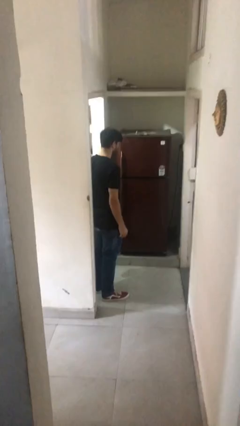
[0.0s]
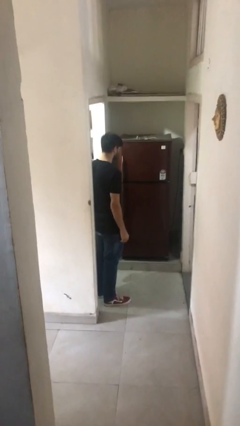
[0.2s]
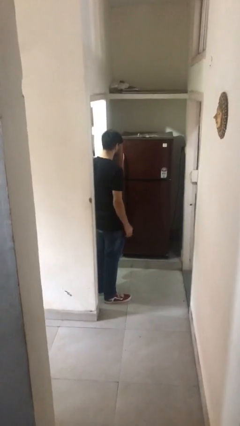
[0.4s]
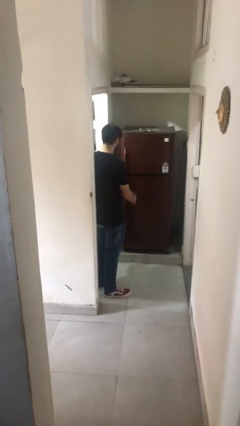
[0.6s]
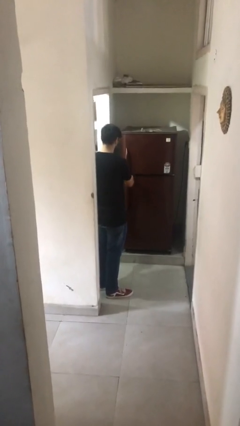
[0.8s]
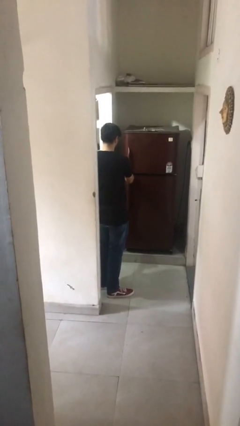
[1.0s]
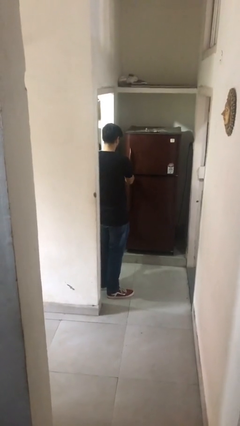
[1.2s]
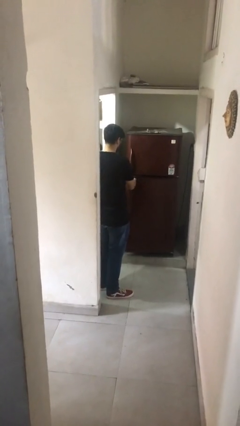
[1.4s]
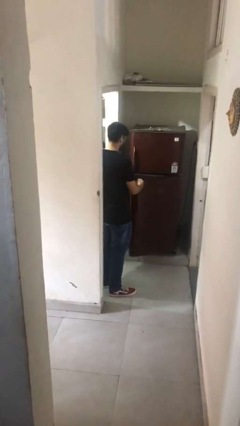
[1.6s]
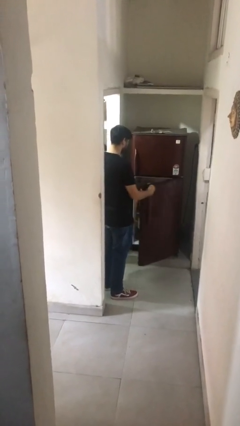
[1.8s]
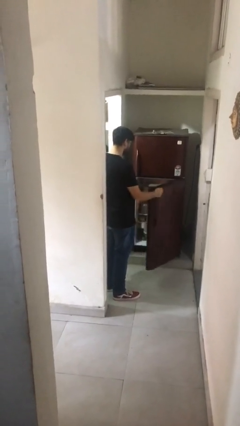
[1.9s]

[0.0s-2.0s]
person opens refrigerator

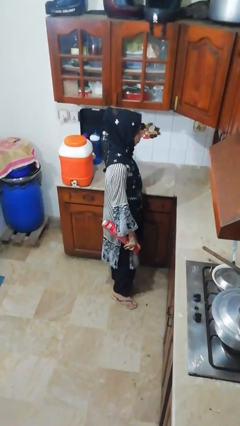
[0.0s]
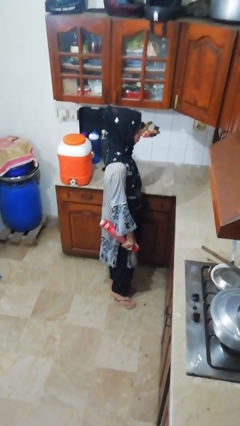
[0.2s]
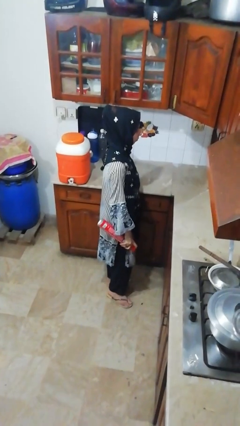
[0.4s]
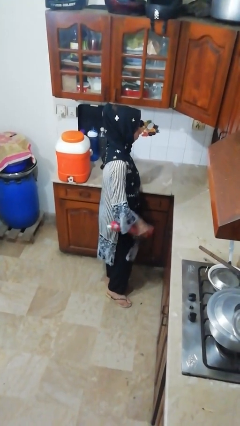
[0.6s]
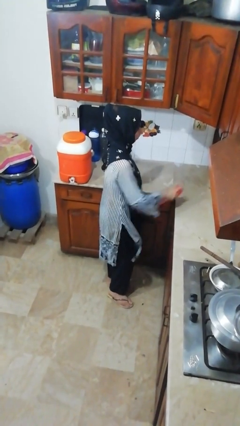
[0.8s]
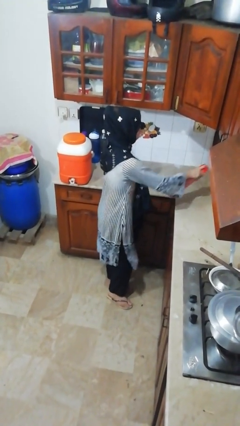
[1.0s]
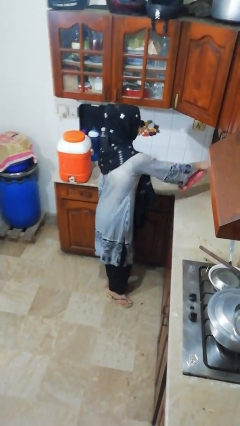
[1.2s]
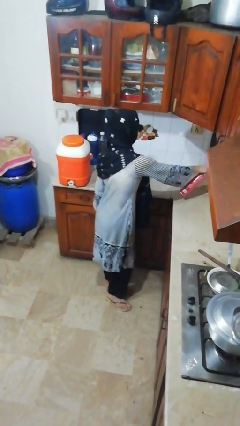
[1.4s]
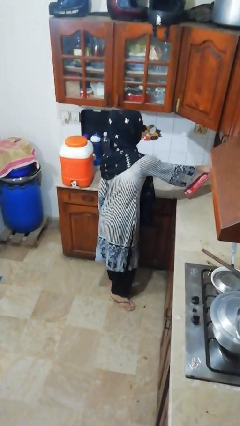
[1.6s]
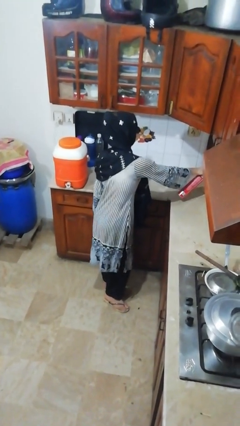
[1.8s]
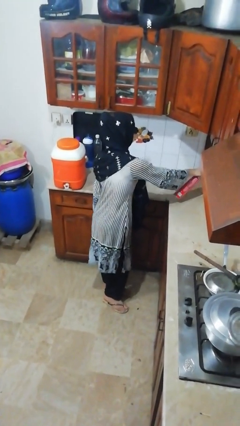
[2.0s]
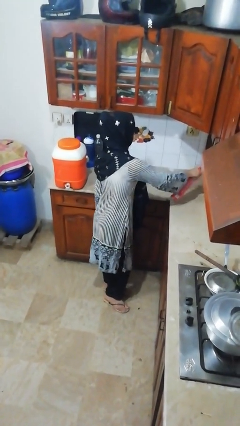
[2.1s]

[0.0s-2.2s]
person sprays from bottle

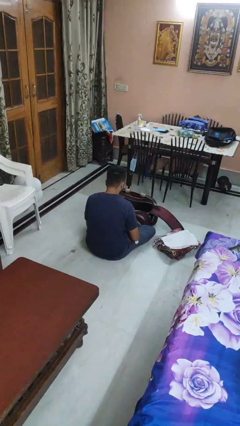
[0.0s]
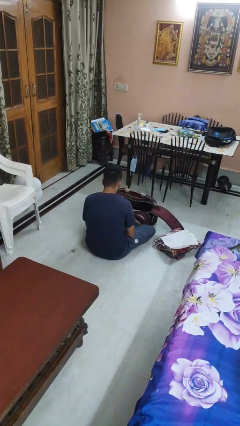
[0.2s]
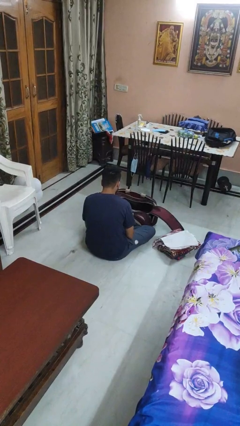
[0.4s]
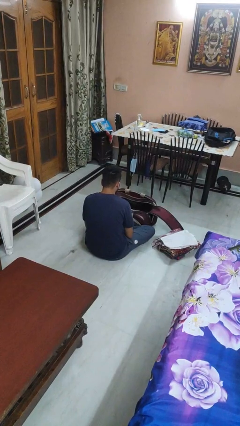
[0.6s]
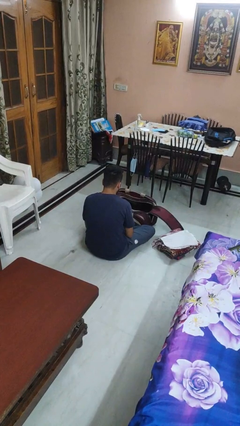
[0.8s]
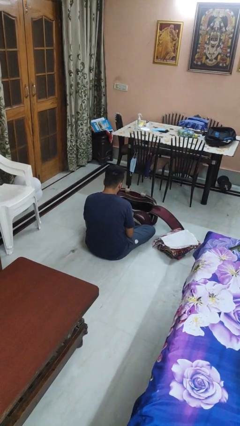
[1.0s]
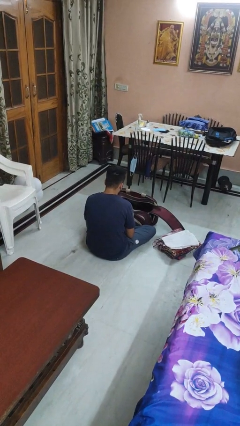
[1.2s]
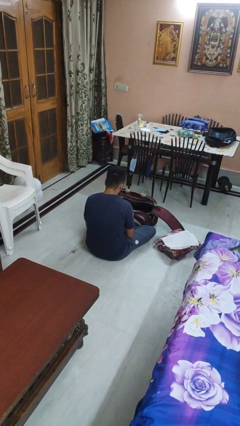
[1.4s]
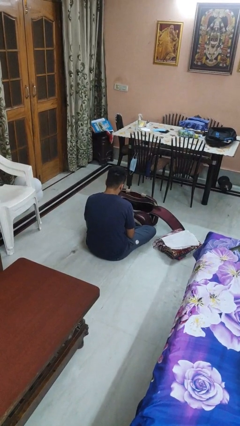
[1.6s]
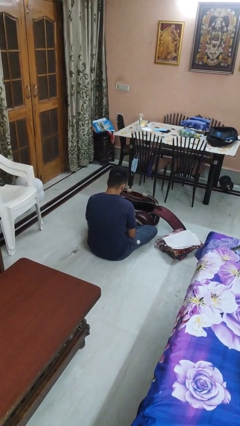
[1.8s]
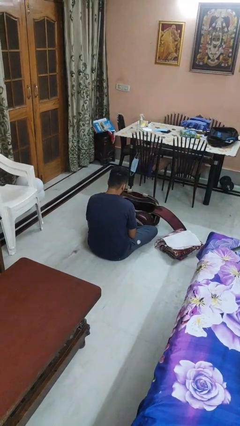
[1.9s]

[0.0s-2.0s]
person arranges flowers in vase

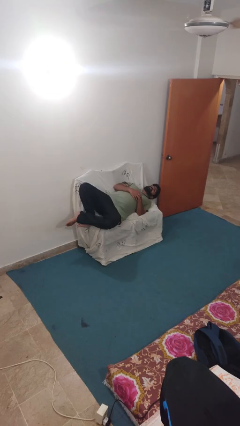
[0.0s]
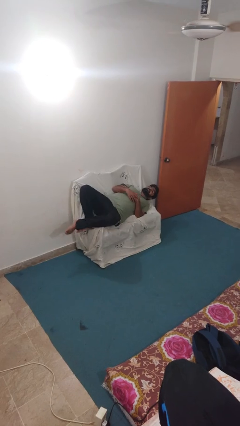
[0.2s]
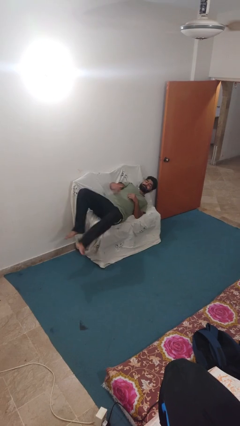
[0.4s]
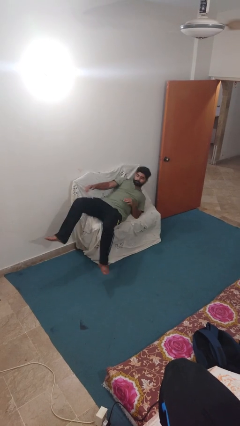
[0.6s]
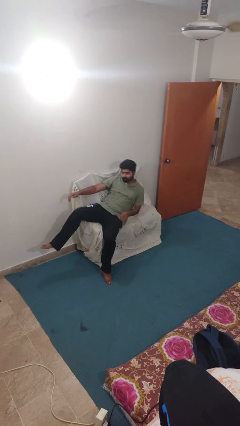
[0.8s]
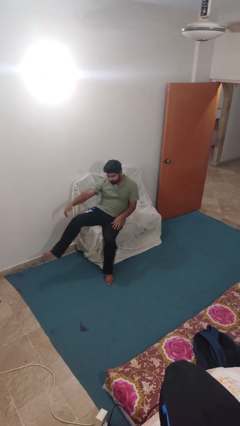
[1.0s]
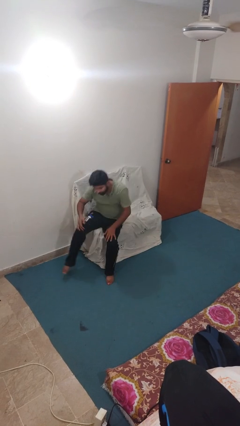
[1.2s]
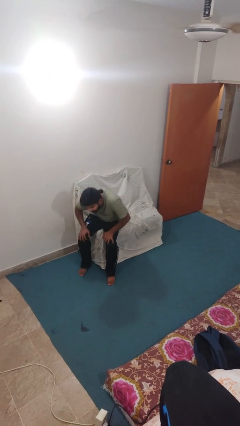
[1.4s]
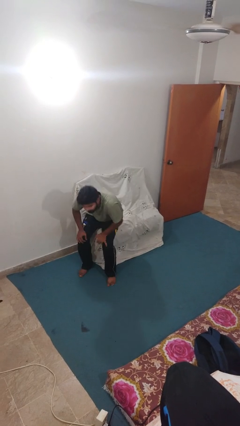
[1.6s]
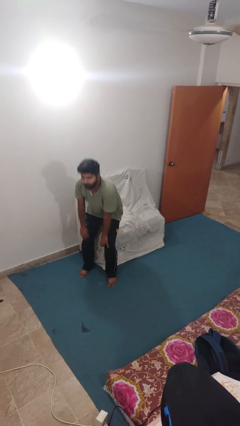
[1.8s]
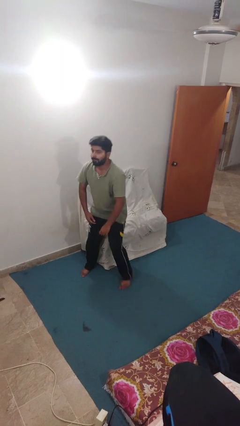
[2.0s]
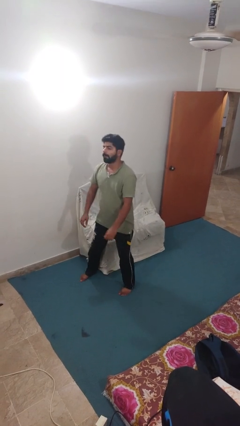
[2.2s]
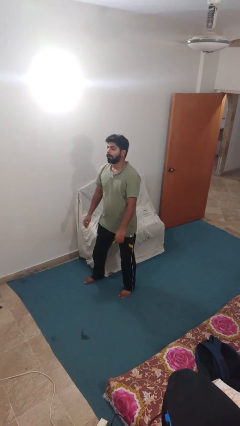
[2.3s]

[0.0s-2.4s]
person stands up

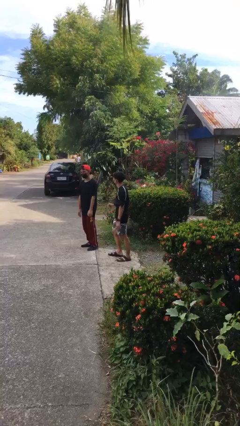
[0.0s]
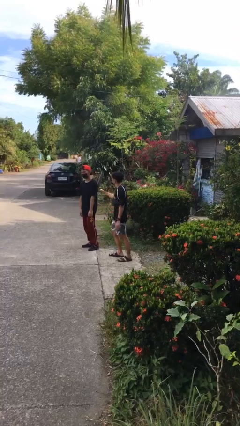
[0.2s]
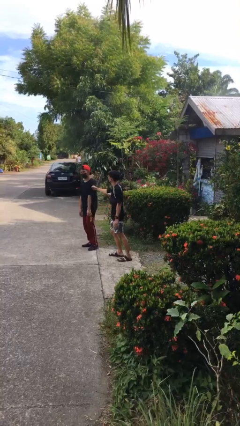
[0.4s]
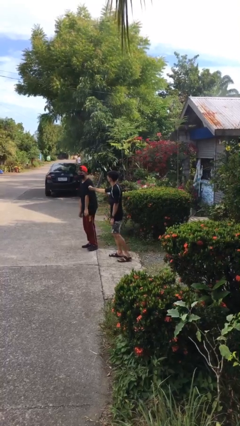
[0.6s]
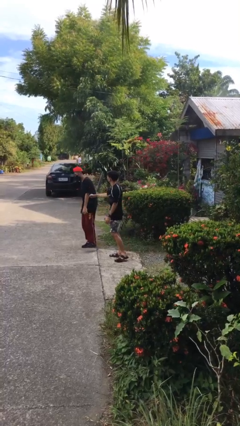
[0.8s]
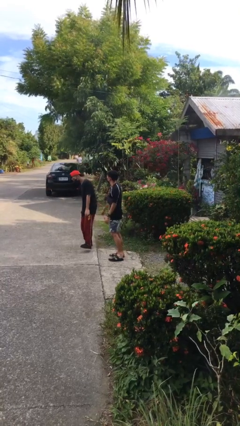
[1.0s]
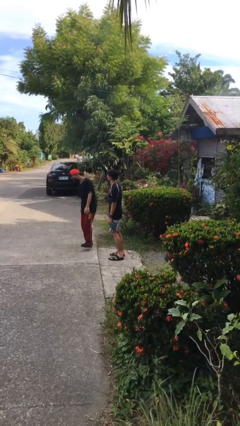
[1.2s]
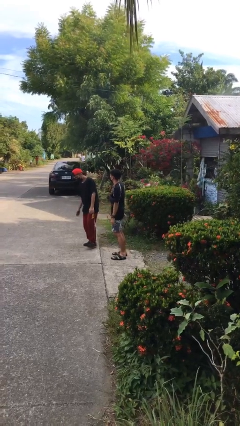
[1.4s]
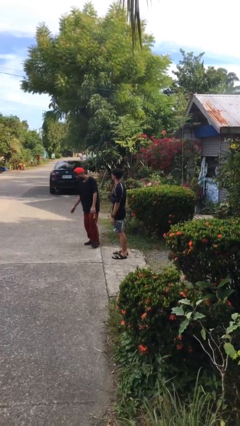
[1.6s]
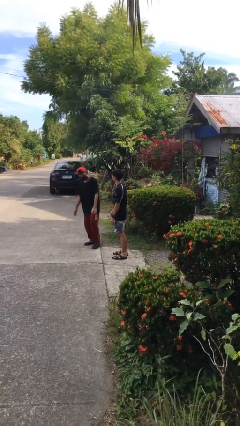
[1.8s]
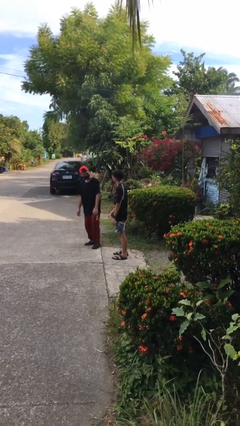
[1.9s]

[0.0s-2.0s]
person pounds shoulders of person

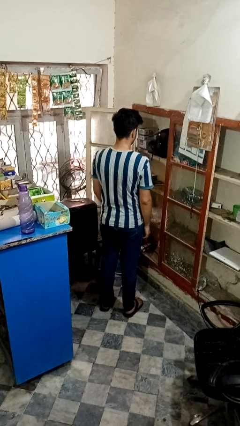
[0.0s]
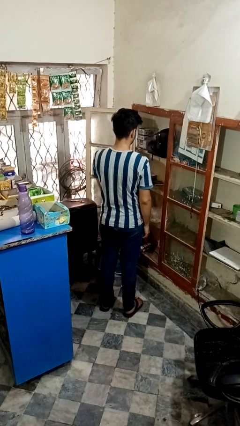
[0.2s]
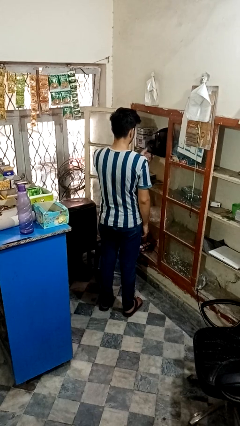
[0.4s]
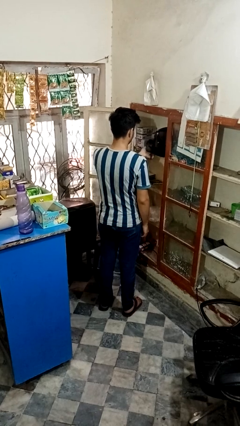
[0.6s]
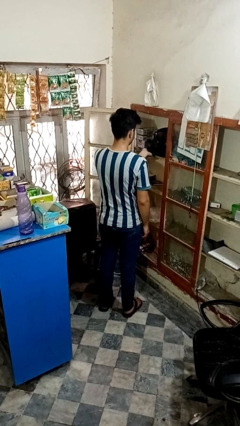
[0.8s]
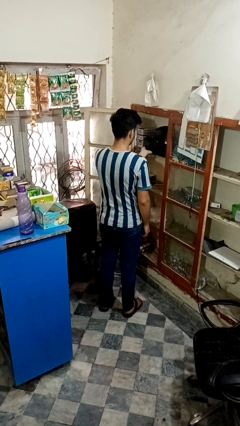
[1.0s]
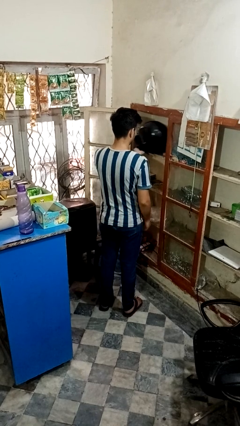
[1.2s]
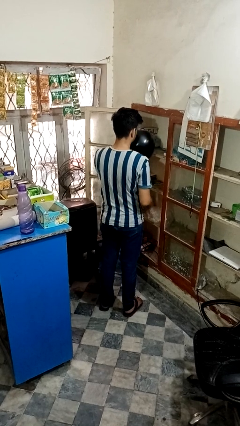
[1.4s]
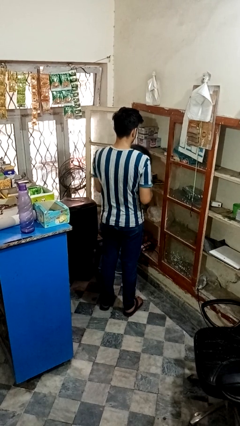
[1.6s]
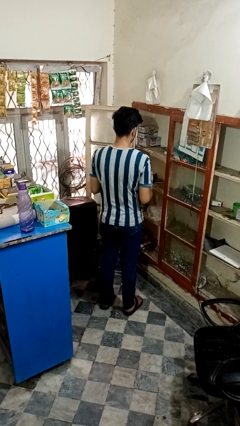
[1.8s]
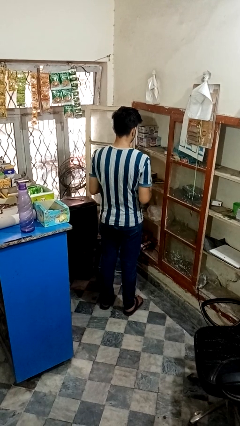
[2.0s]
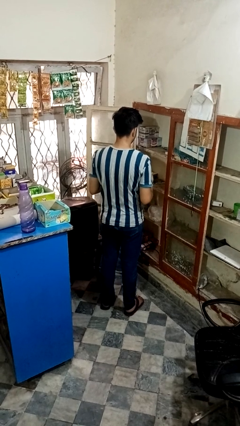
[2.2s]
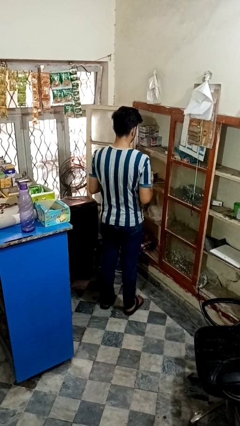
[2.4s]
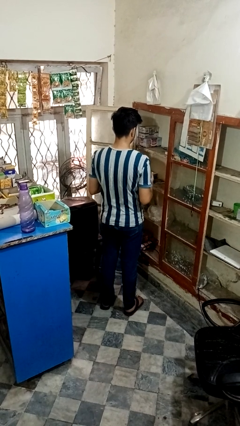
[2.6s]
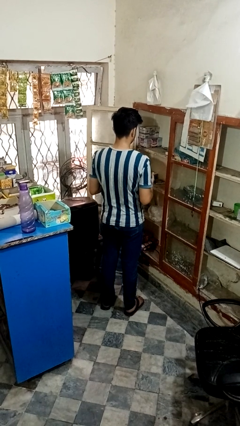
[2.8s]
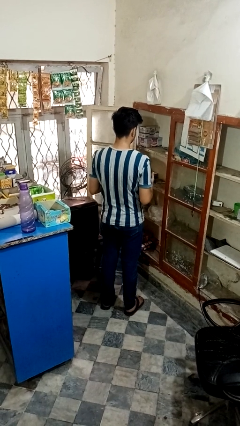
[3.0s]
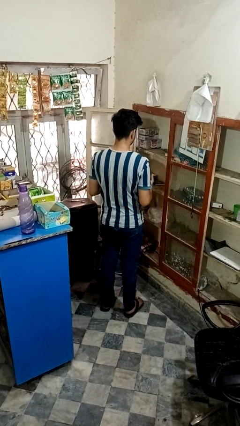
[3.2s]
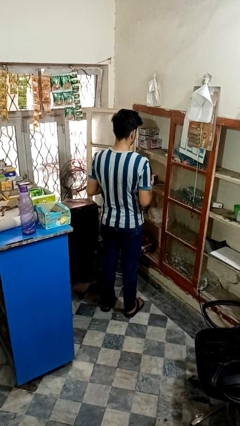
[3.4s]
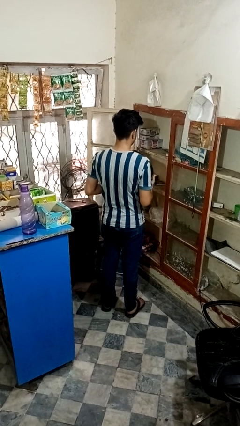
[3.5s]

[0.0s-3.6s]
person picks up object from shelf

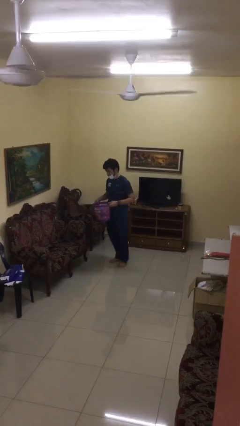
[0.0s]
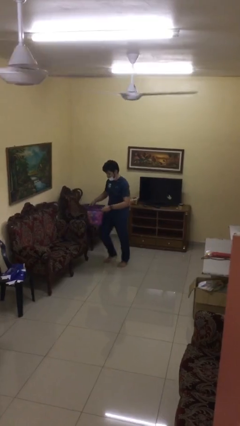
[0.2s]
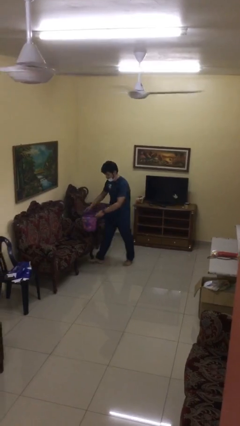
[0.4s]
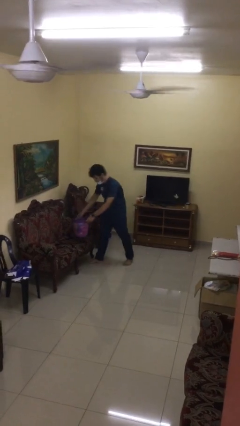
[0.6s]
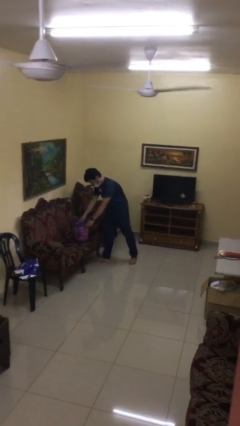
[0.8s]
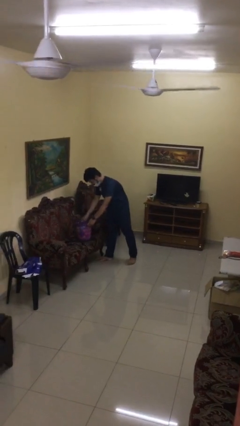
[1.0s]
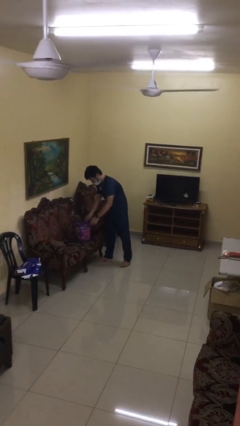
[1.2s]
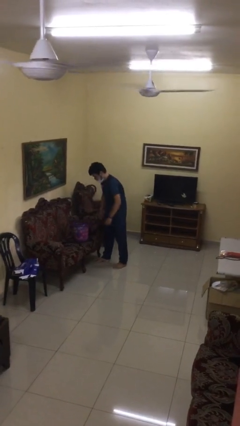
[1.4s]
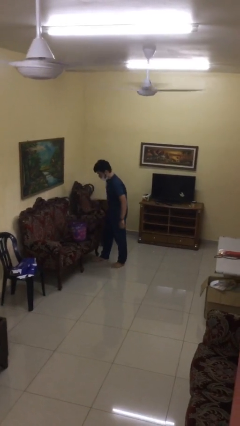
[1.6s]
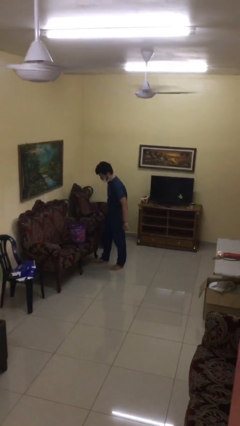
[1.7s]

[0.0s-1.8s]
person puts down object on couch

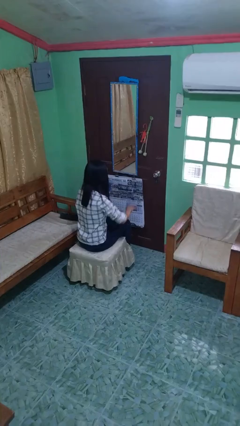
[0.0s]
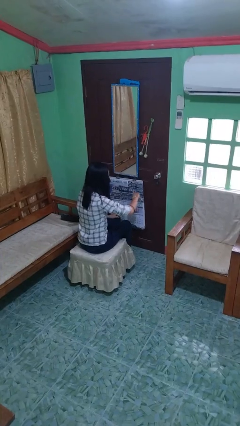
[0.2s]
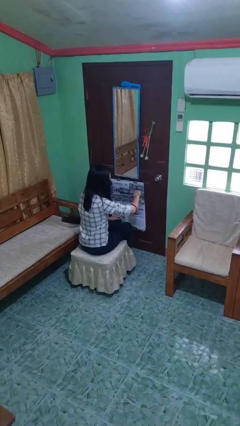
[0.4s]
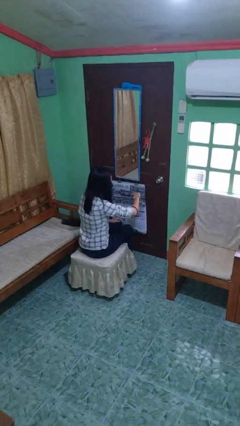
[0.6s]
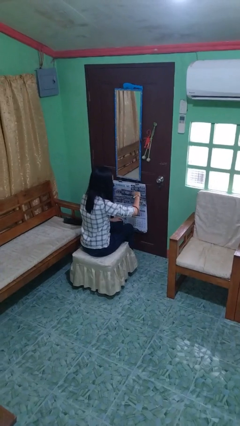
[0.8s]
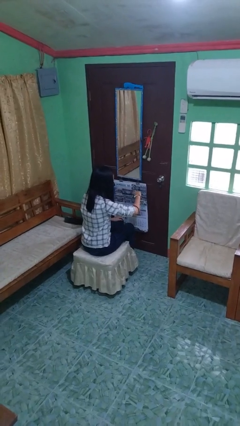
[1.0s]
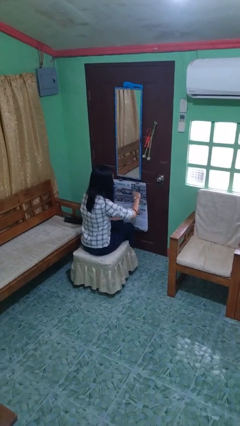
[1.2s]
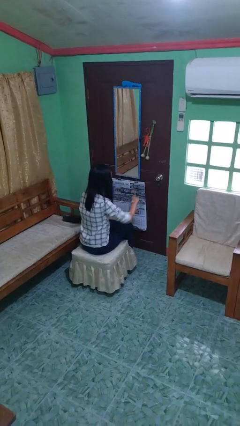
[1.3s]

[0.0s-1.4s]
person looks at wristwatch
